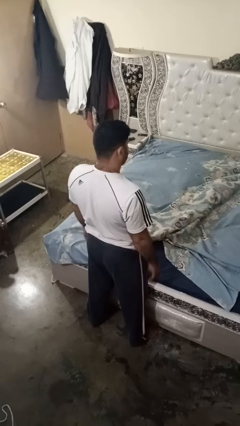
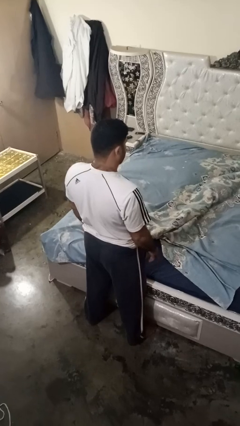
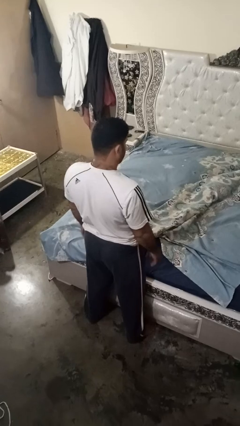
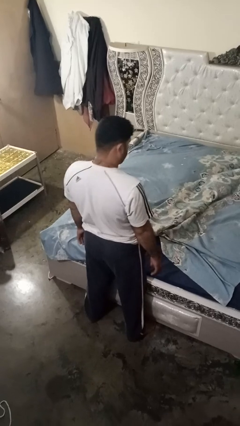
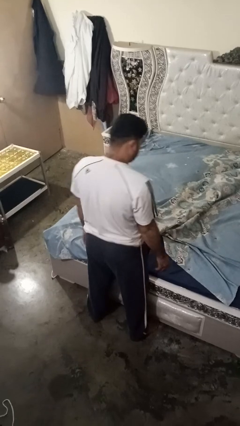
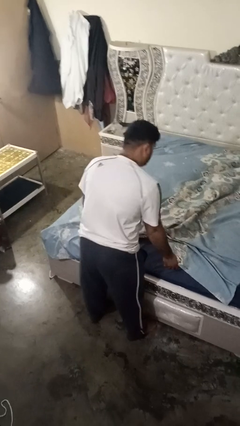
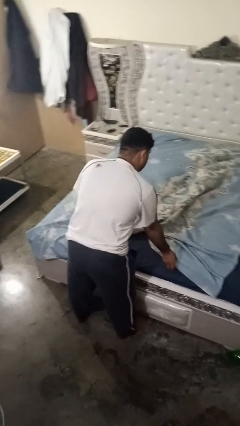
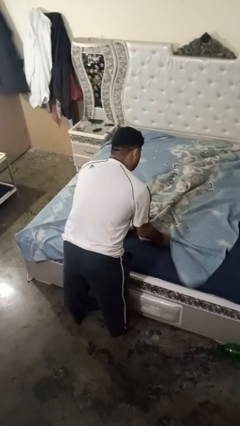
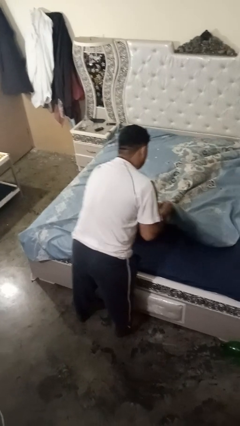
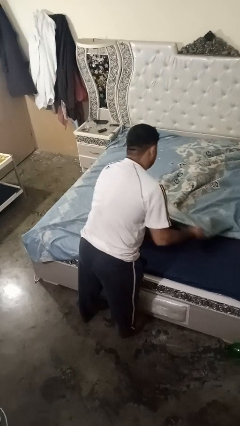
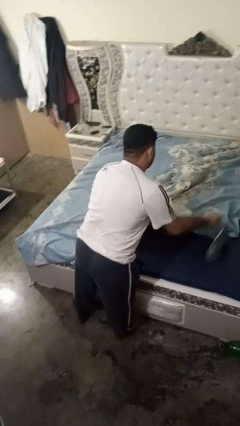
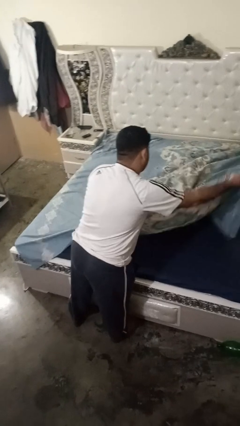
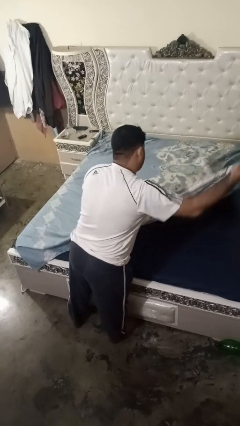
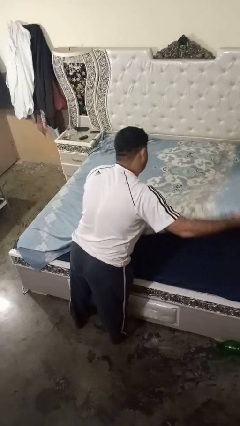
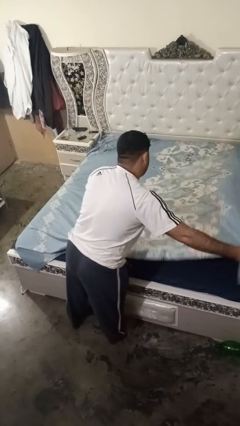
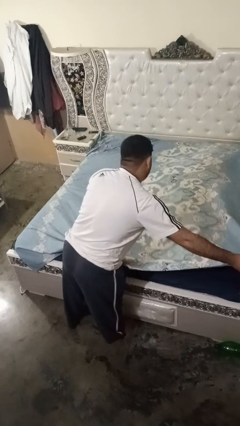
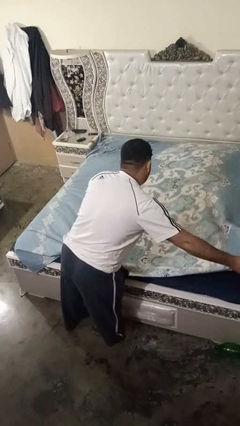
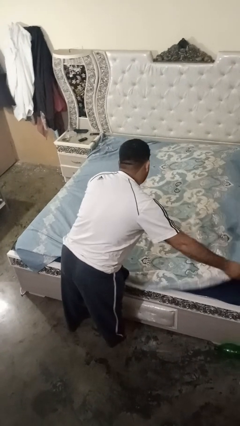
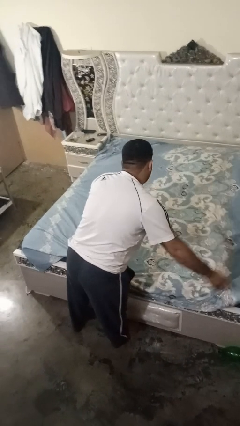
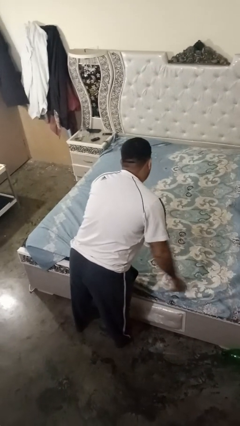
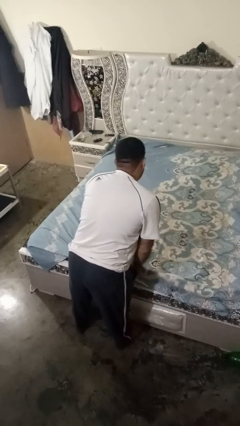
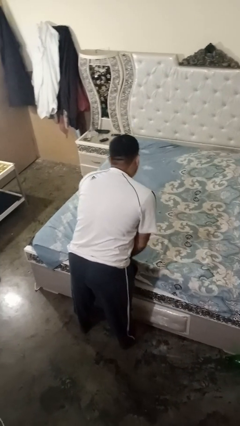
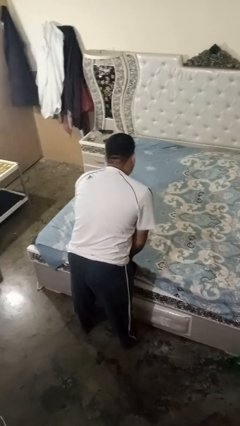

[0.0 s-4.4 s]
person makes bed

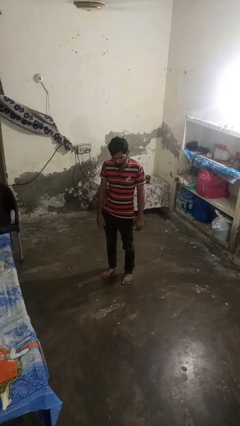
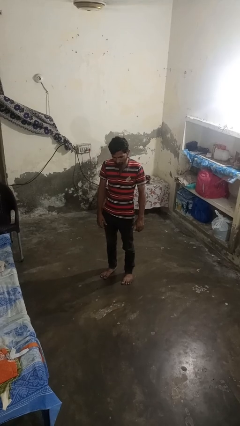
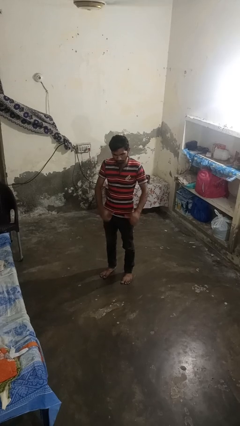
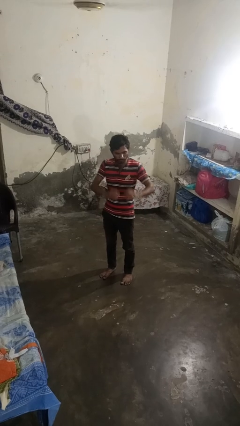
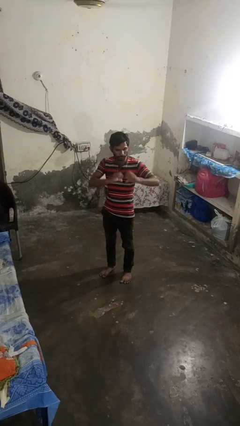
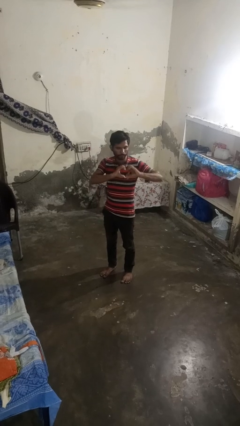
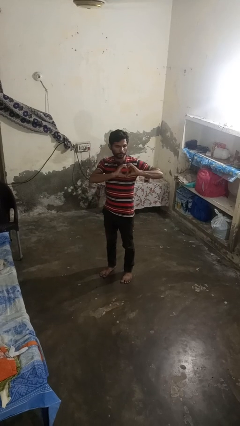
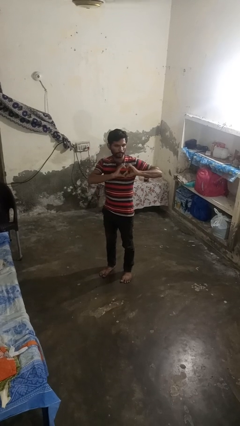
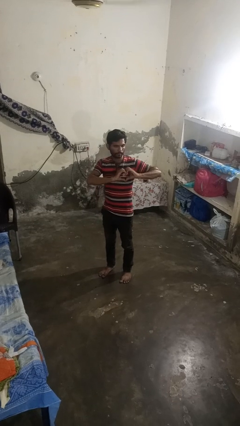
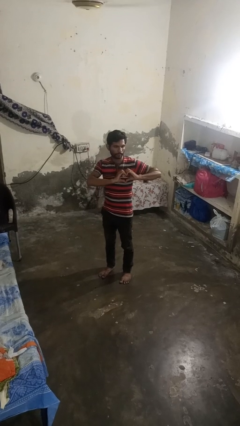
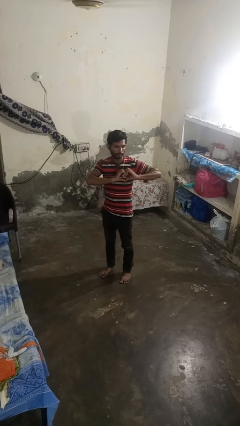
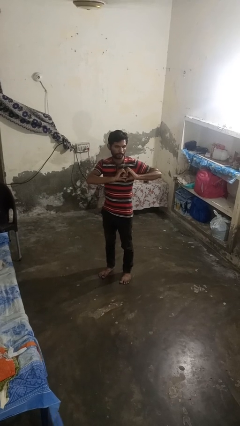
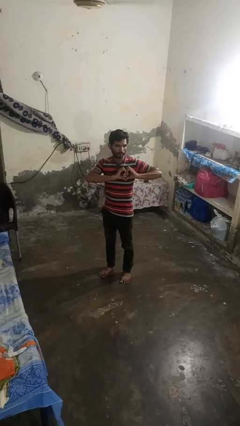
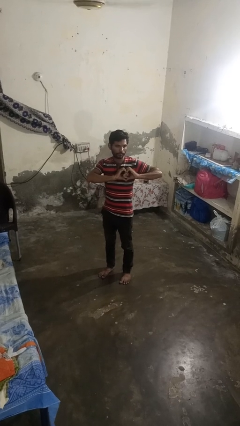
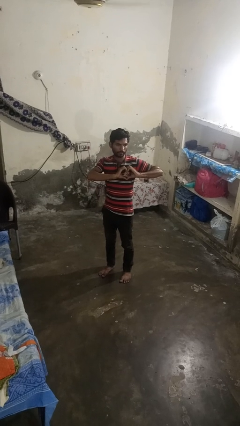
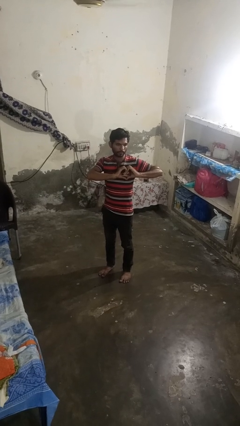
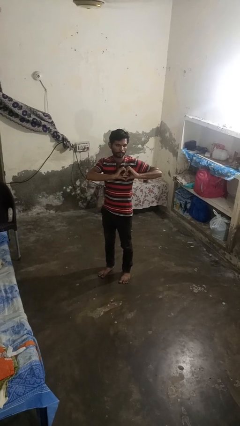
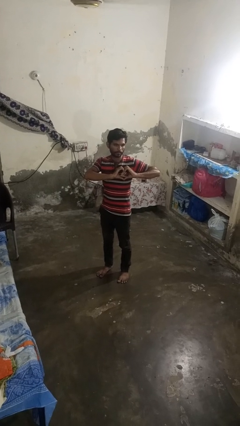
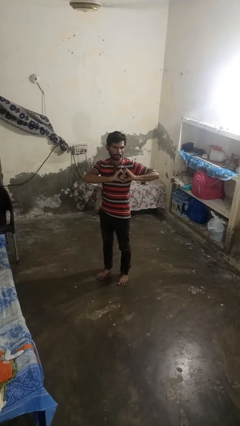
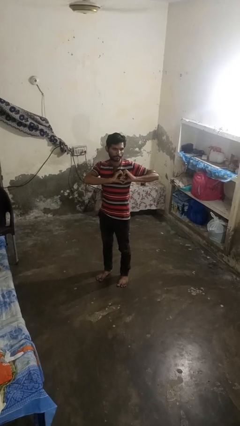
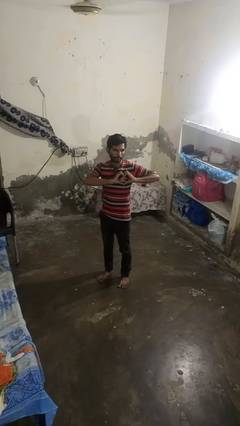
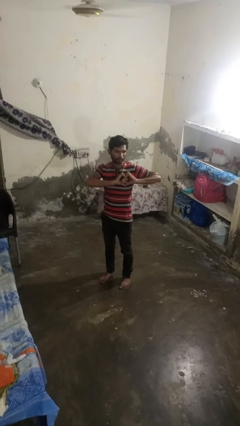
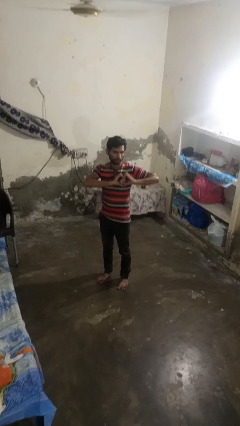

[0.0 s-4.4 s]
person gestures heart

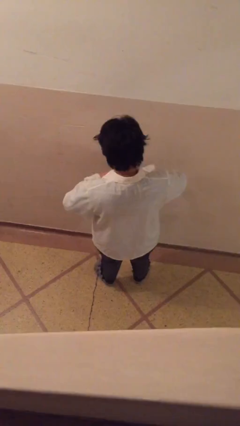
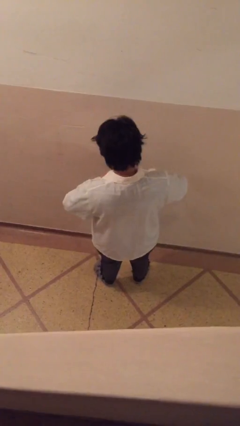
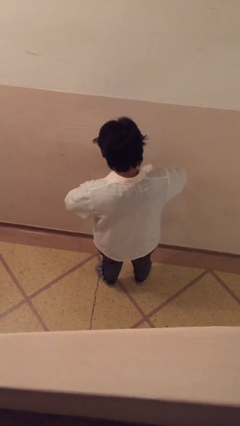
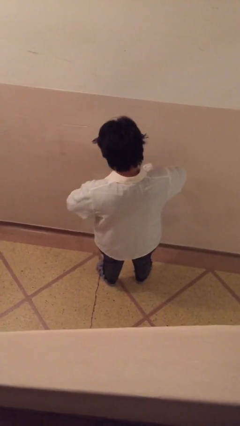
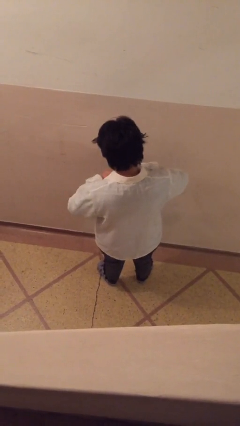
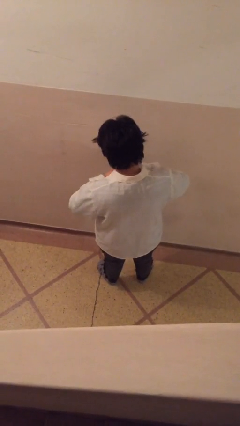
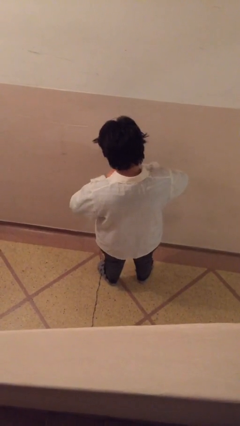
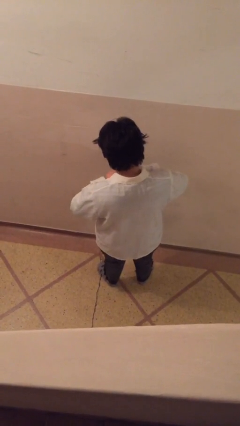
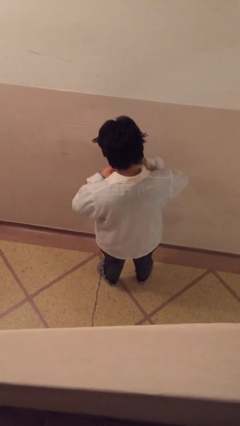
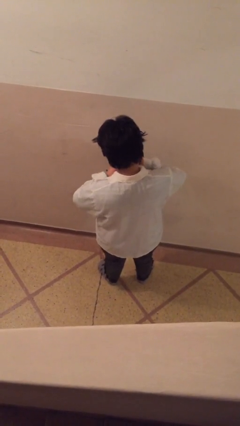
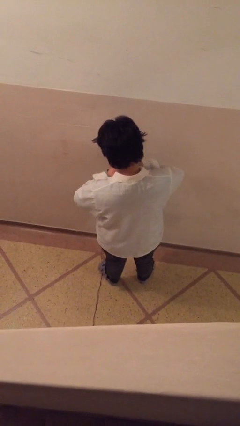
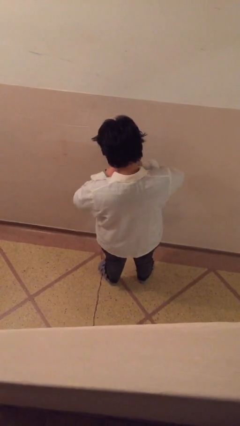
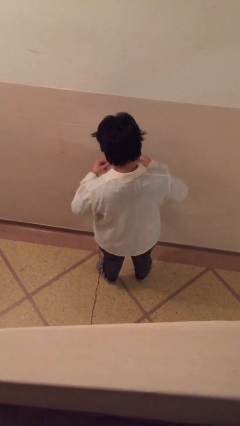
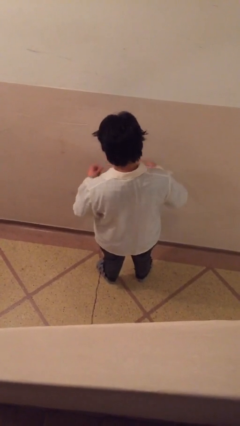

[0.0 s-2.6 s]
person buttons shirt

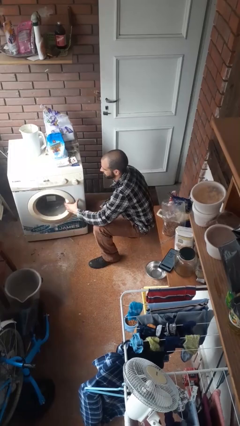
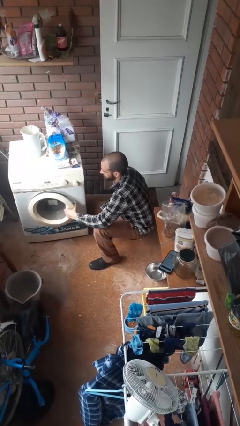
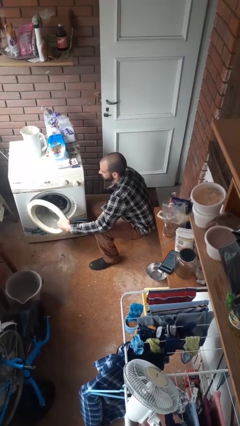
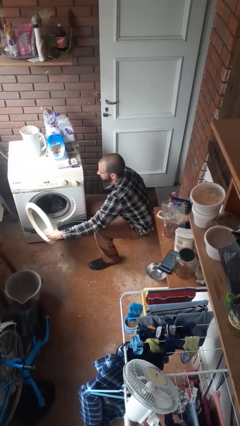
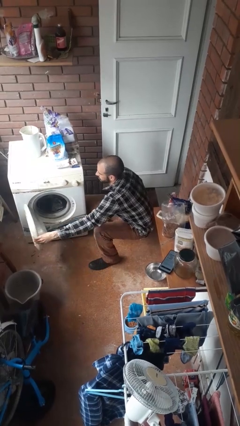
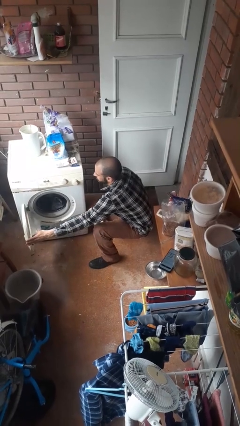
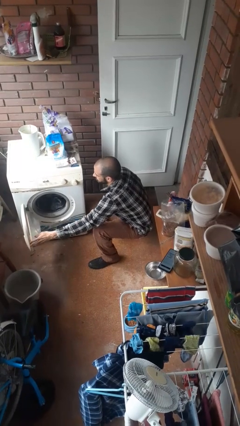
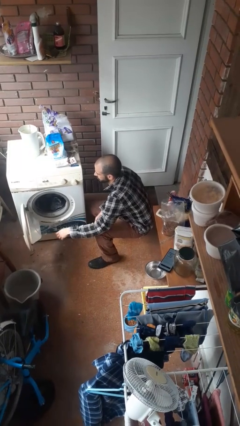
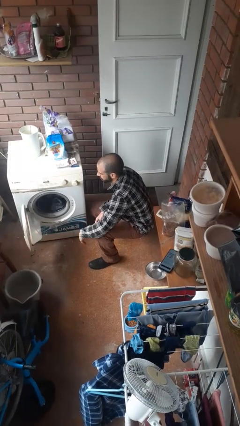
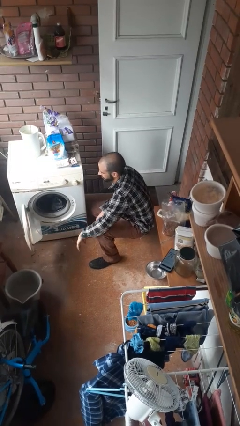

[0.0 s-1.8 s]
person opens clothes washer

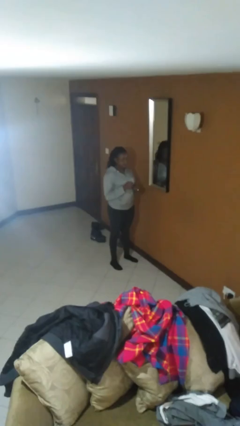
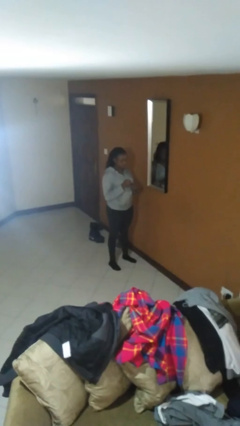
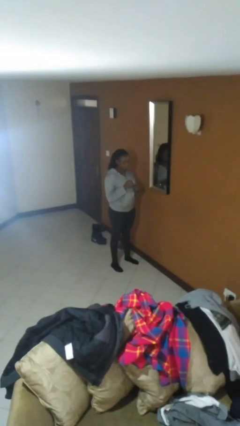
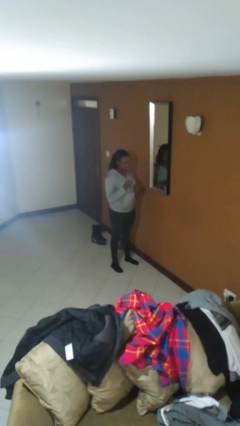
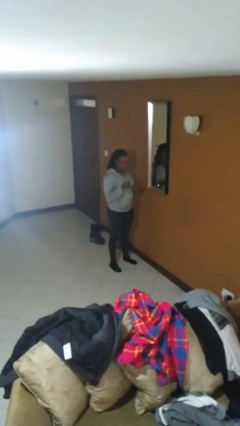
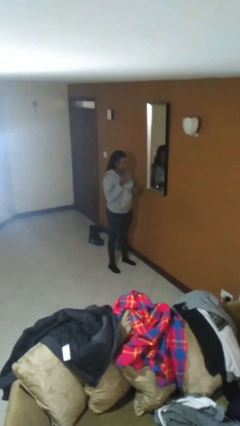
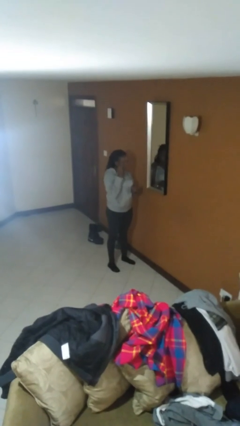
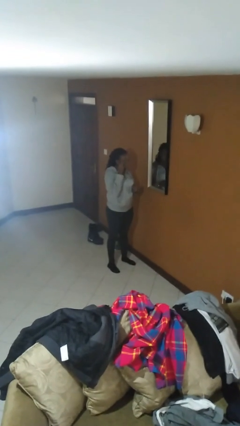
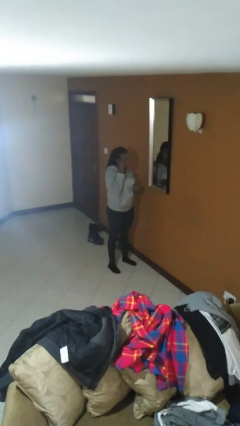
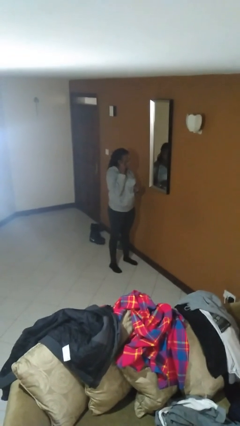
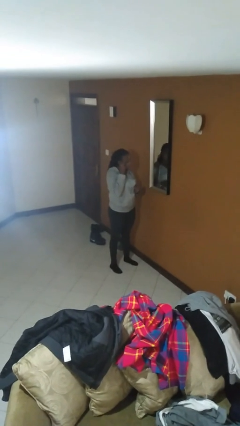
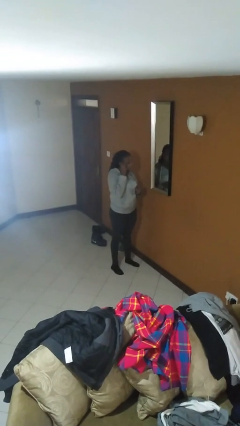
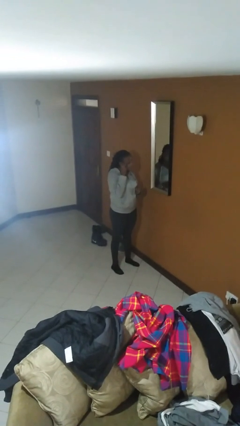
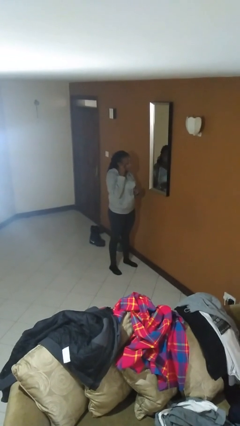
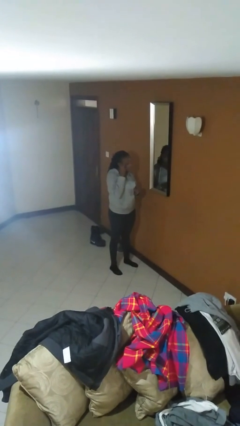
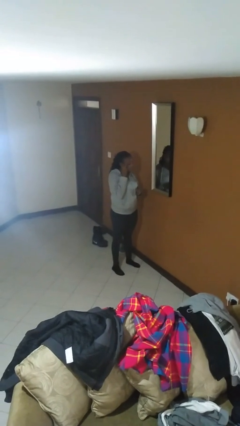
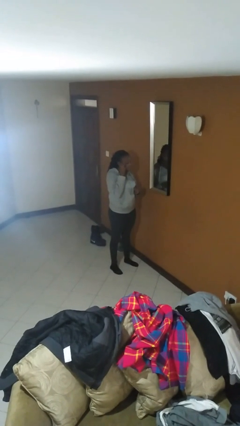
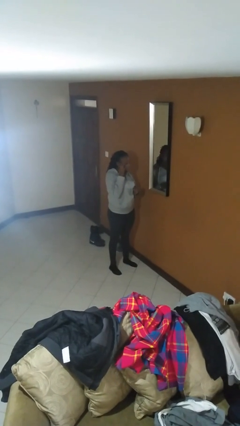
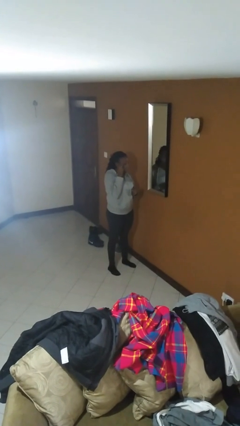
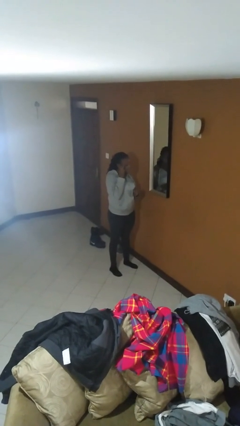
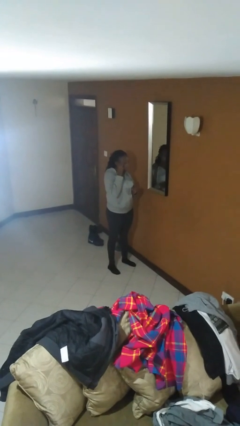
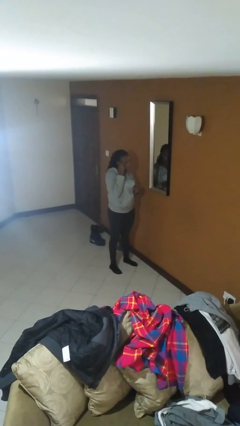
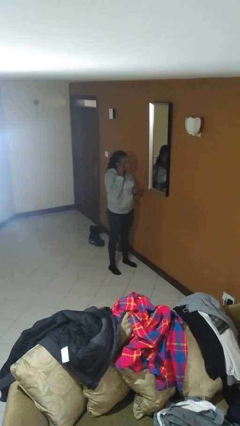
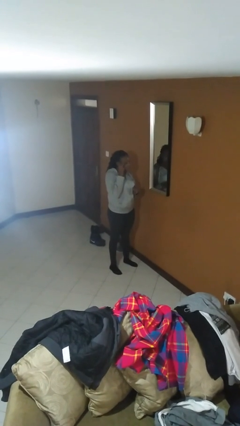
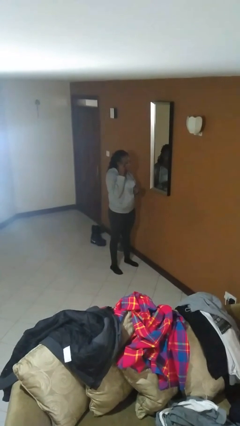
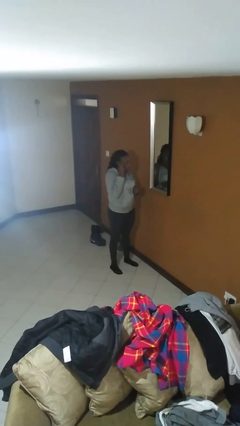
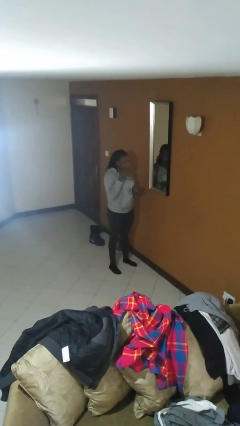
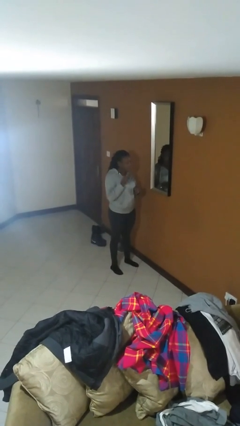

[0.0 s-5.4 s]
person applies eye makeup
